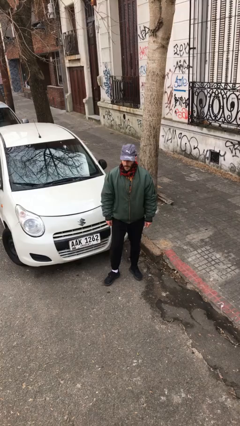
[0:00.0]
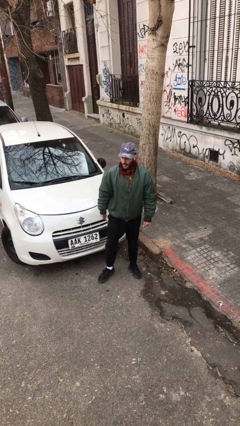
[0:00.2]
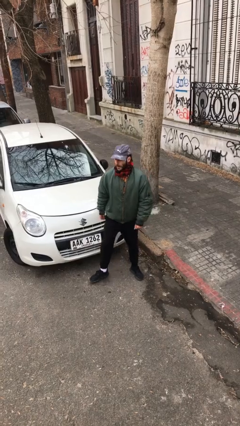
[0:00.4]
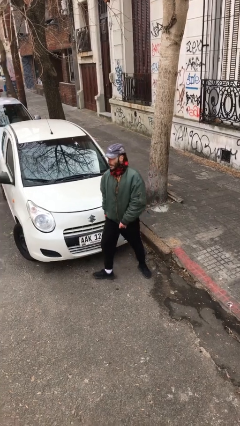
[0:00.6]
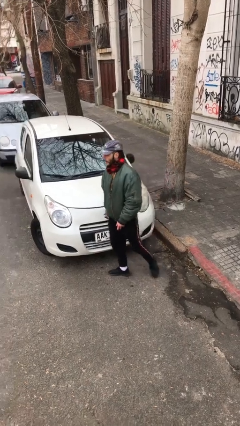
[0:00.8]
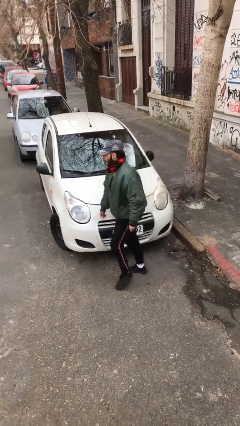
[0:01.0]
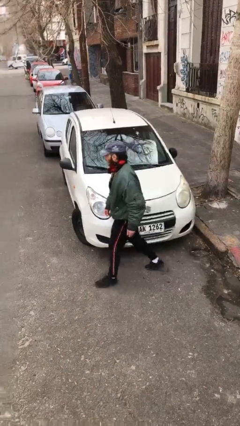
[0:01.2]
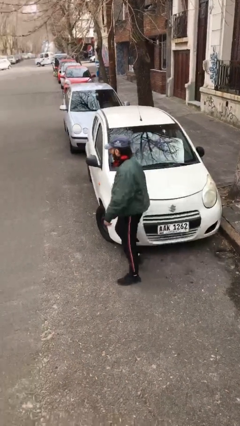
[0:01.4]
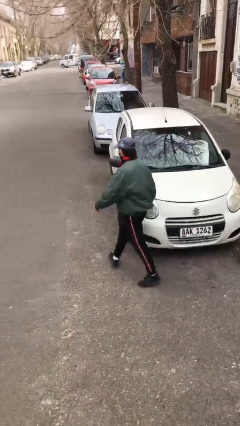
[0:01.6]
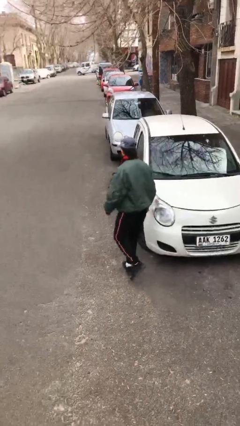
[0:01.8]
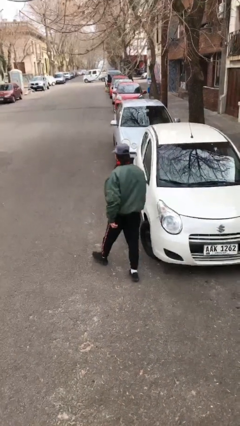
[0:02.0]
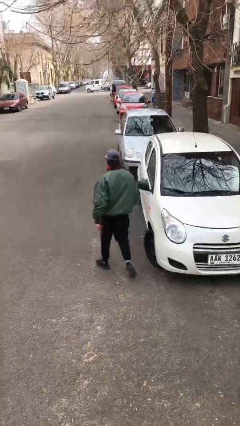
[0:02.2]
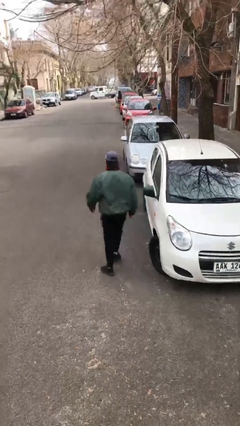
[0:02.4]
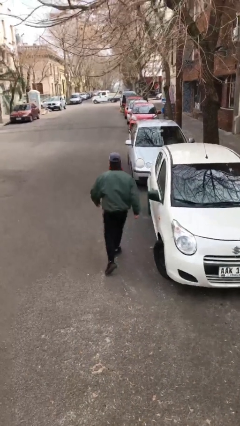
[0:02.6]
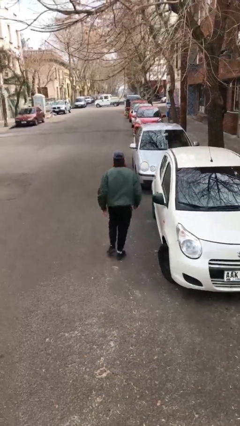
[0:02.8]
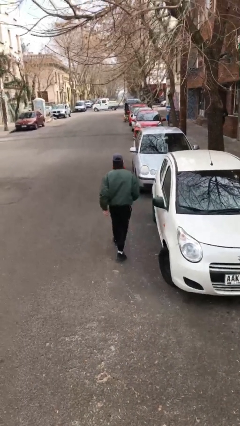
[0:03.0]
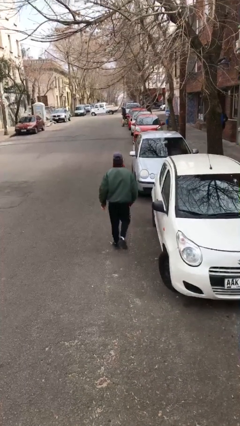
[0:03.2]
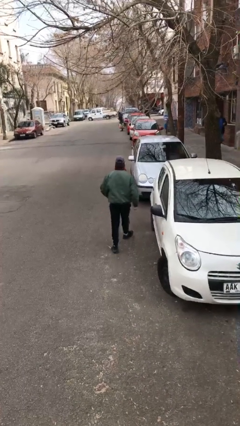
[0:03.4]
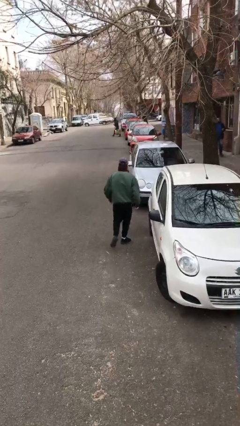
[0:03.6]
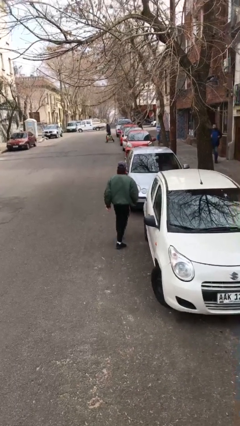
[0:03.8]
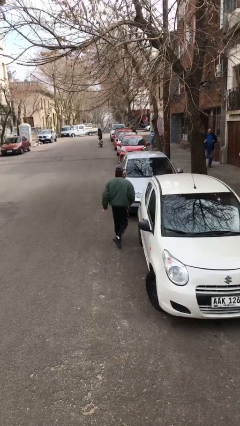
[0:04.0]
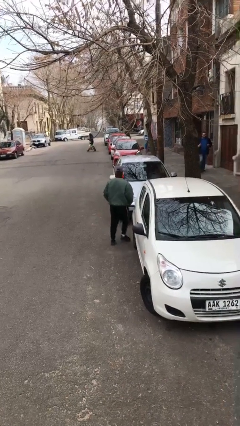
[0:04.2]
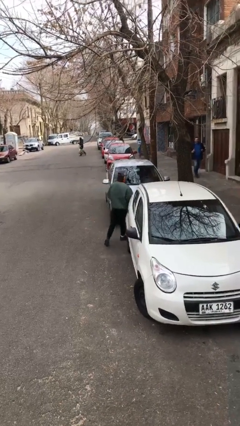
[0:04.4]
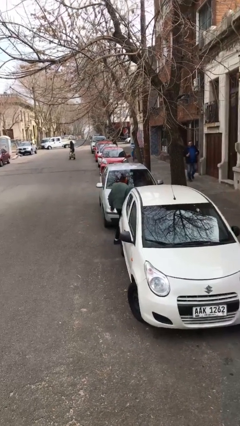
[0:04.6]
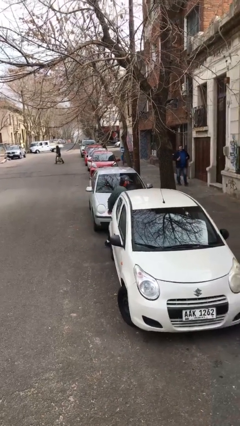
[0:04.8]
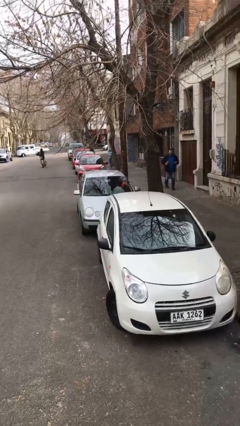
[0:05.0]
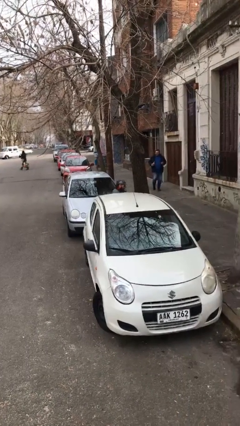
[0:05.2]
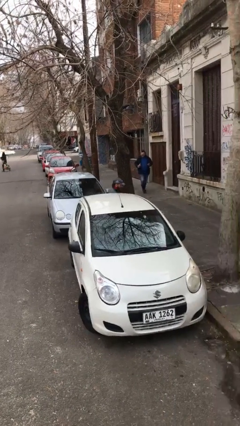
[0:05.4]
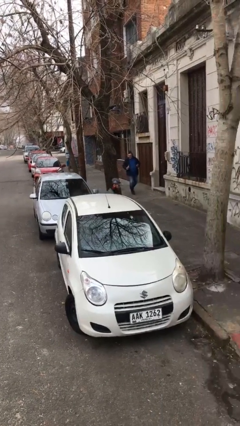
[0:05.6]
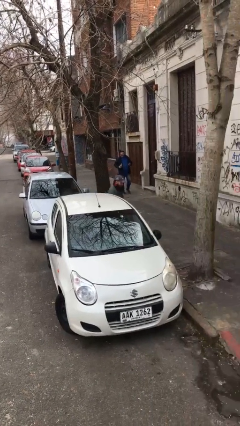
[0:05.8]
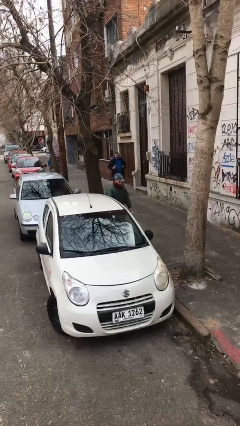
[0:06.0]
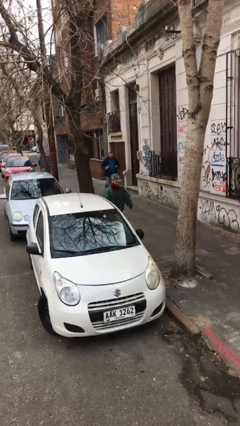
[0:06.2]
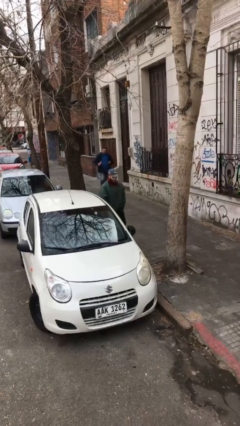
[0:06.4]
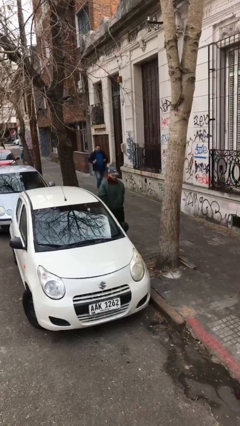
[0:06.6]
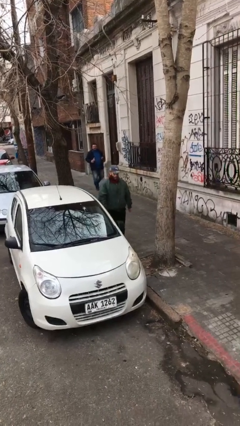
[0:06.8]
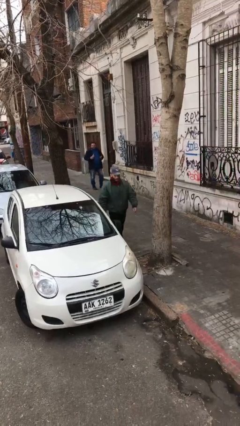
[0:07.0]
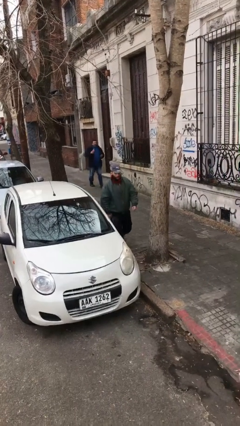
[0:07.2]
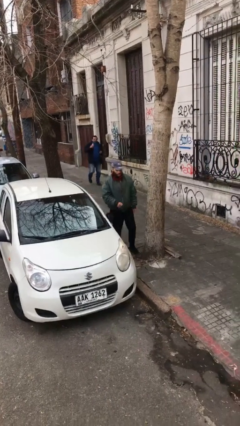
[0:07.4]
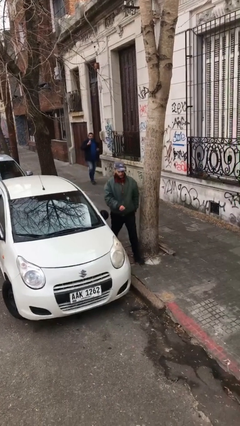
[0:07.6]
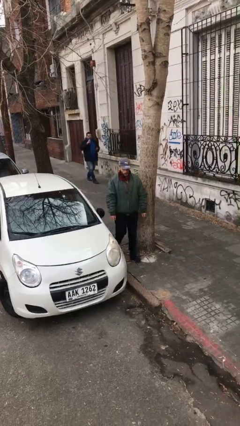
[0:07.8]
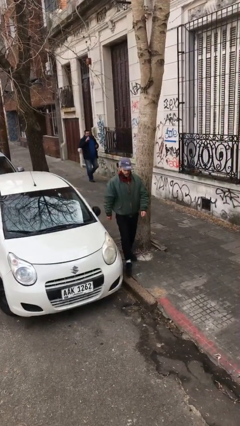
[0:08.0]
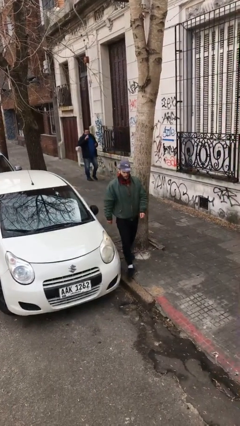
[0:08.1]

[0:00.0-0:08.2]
person walks around car

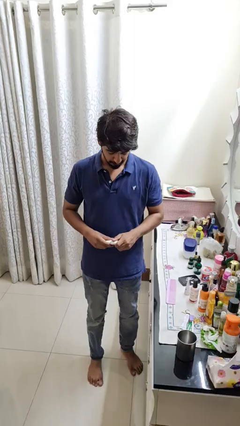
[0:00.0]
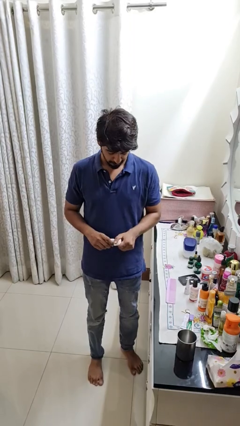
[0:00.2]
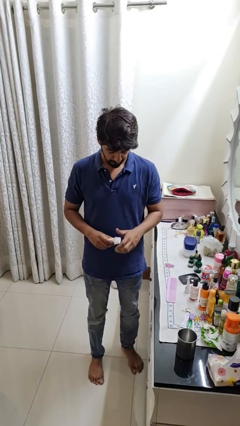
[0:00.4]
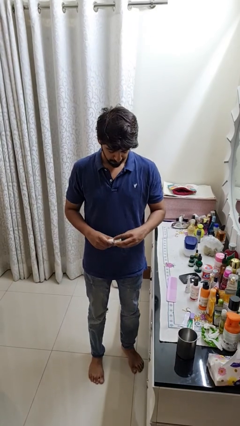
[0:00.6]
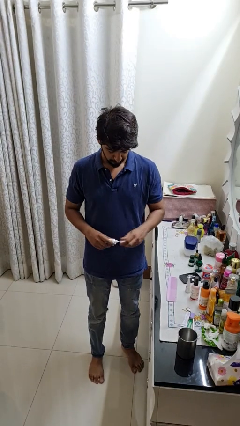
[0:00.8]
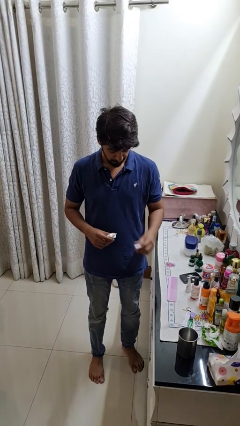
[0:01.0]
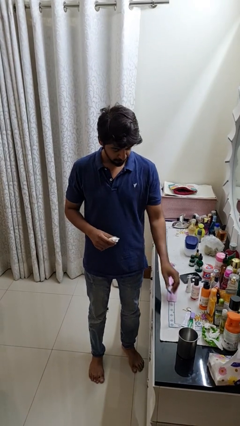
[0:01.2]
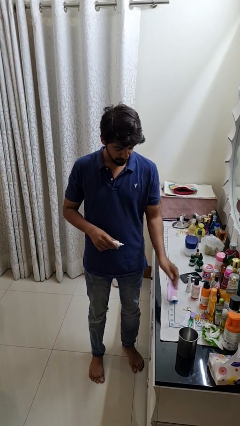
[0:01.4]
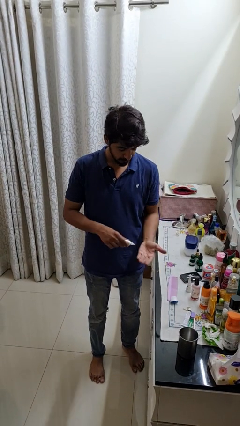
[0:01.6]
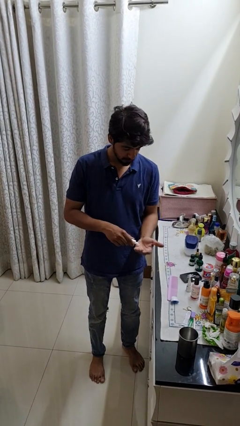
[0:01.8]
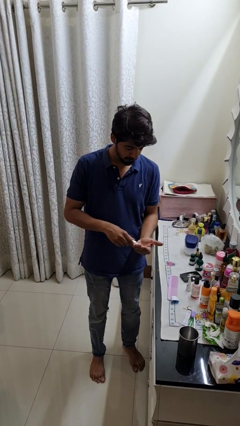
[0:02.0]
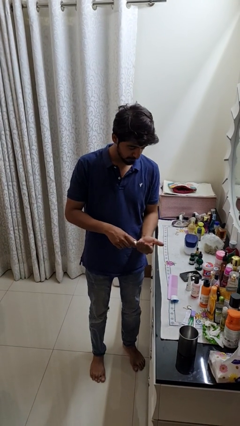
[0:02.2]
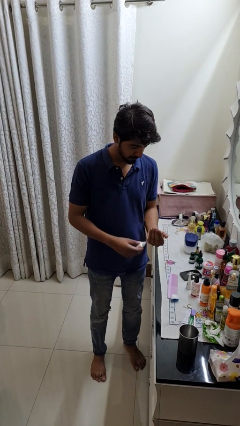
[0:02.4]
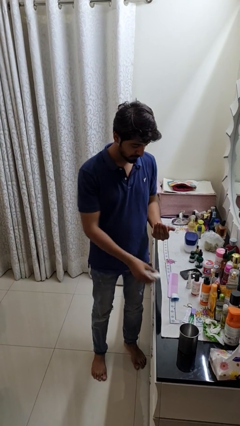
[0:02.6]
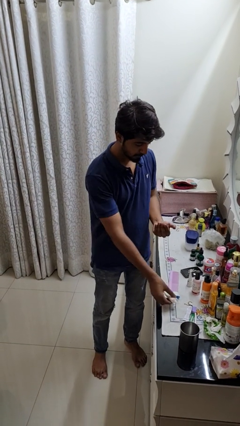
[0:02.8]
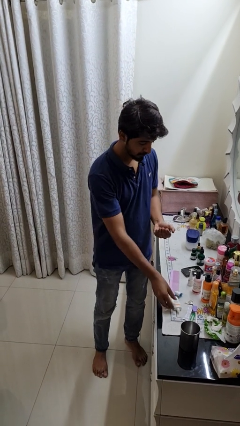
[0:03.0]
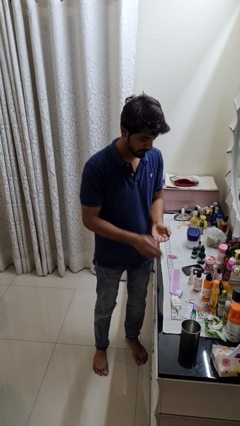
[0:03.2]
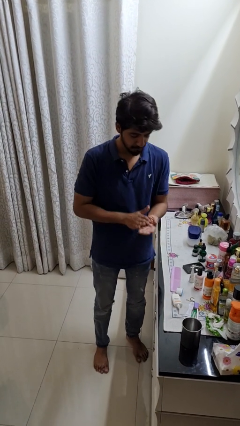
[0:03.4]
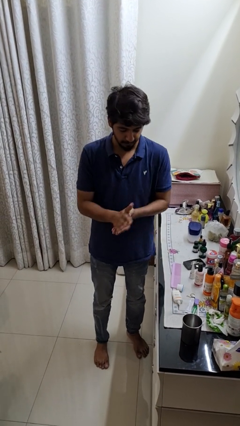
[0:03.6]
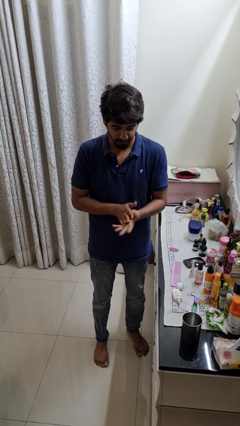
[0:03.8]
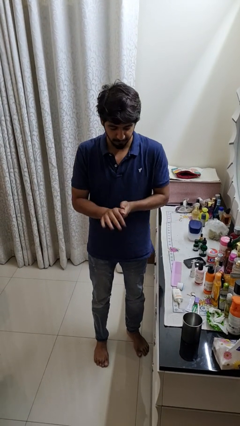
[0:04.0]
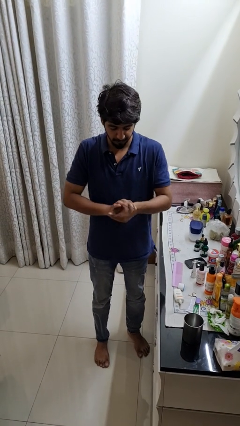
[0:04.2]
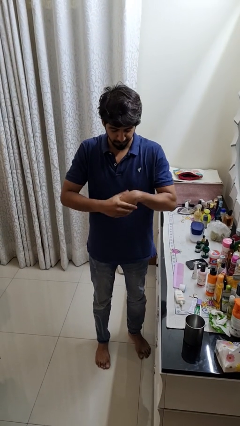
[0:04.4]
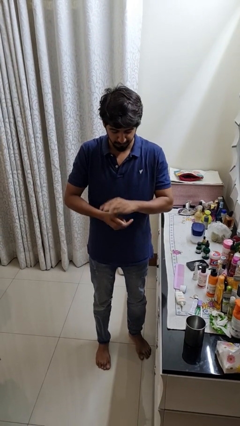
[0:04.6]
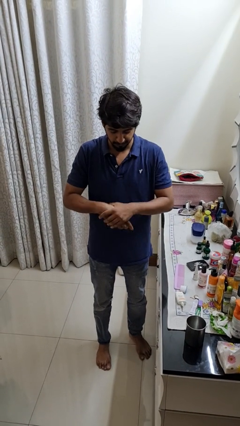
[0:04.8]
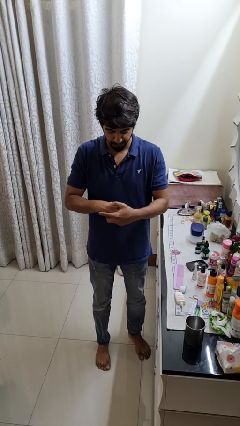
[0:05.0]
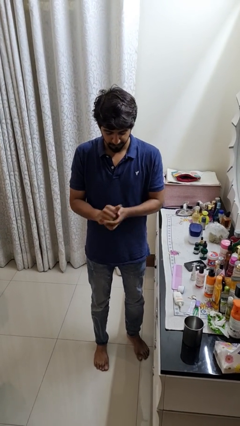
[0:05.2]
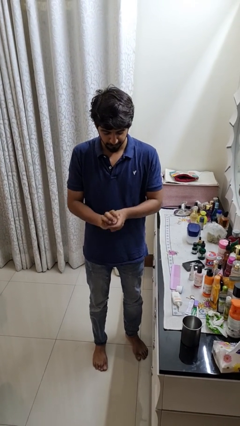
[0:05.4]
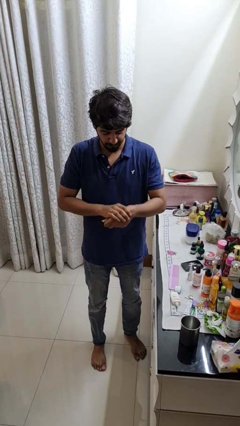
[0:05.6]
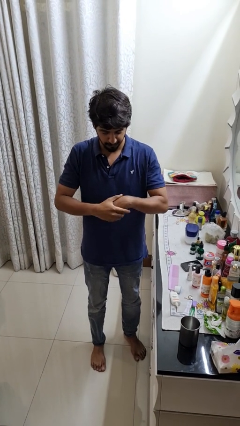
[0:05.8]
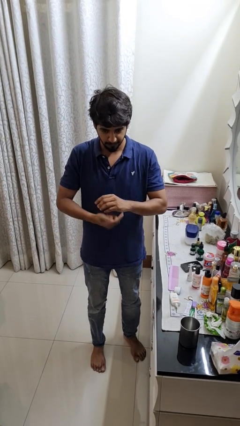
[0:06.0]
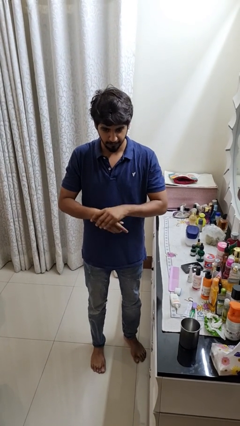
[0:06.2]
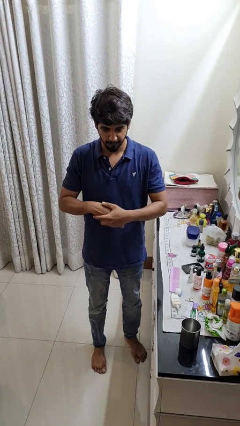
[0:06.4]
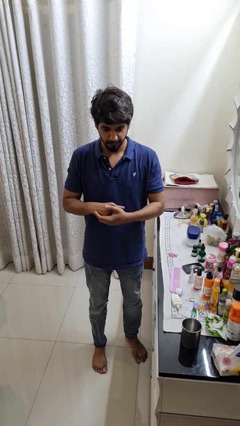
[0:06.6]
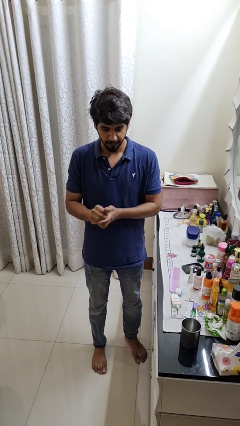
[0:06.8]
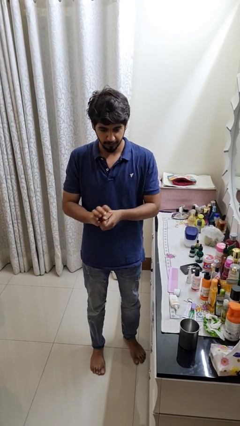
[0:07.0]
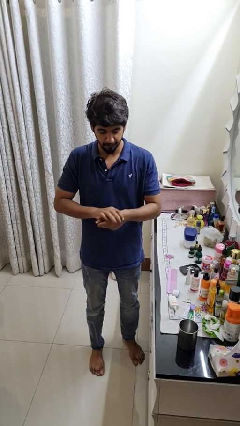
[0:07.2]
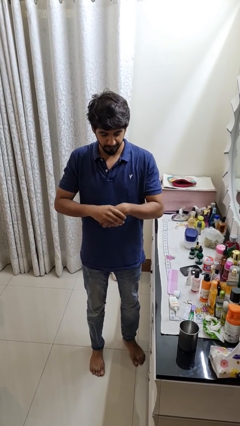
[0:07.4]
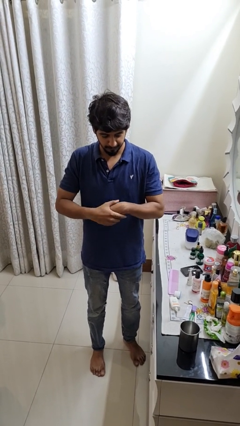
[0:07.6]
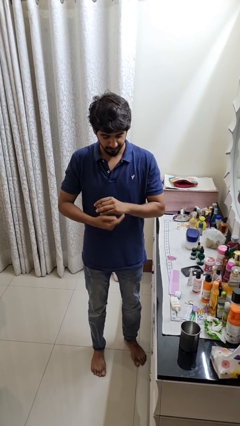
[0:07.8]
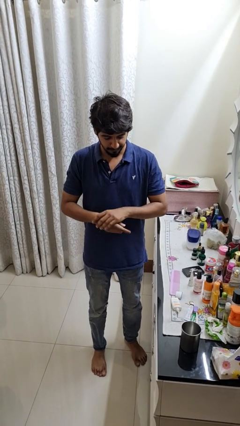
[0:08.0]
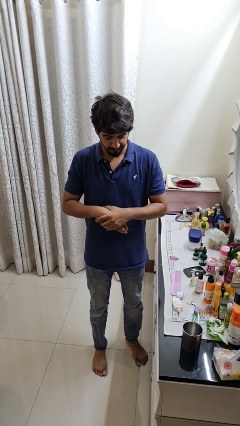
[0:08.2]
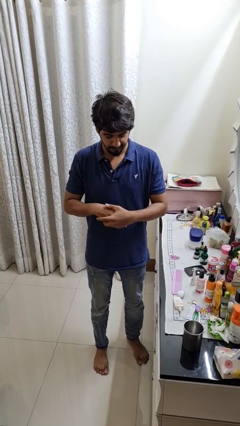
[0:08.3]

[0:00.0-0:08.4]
person applies sunscreen

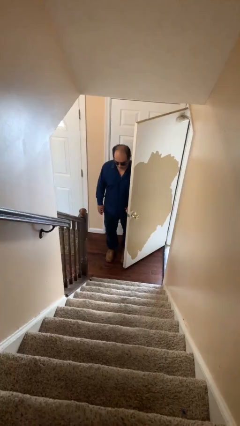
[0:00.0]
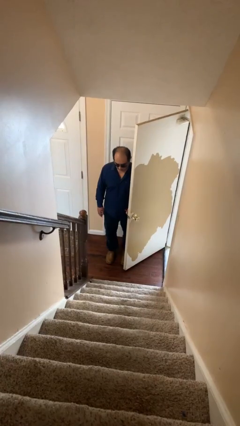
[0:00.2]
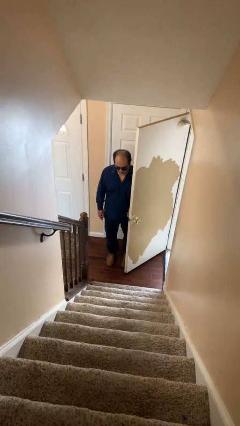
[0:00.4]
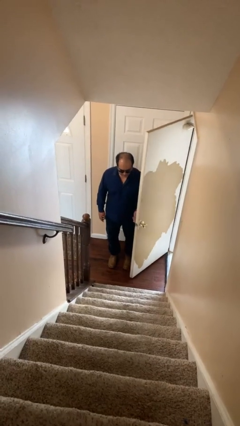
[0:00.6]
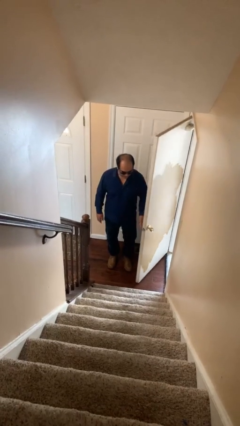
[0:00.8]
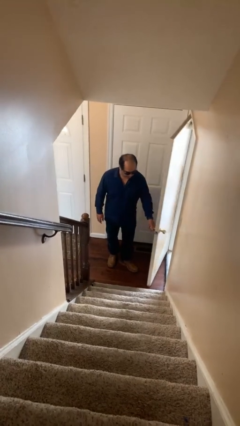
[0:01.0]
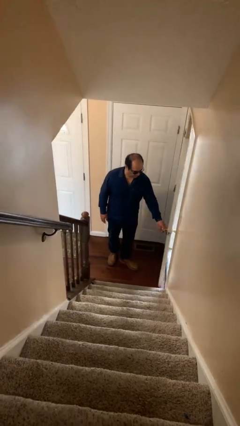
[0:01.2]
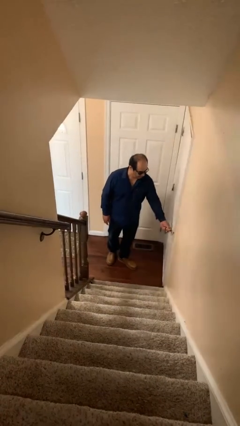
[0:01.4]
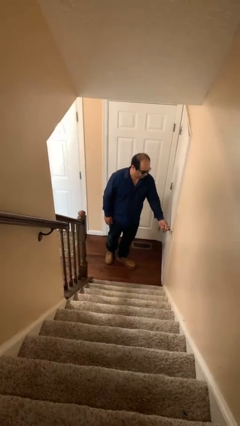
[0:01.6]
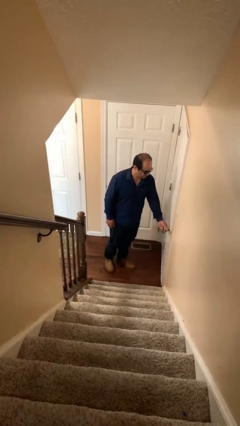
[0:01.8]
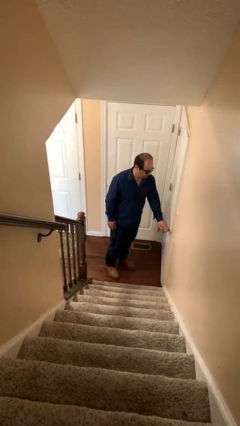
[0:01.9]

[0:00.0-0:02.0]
person closes facility door
